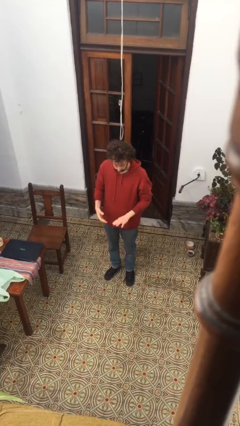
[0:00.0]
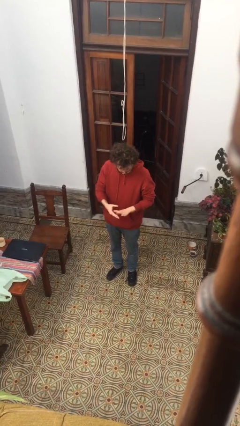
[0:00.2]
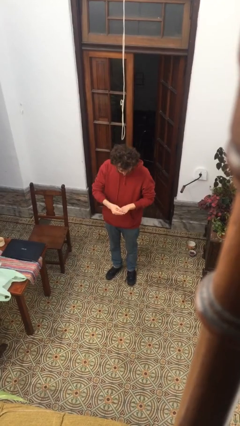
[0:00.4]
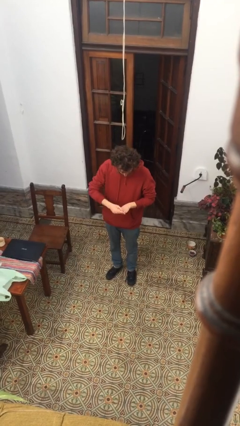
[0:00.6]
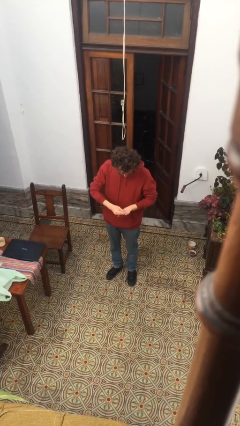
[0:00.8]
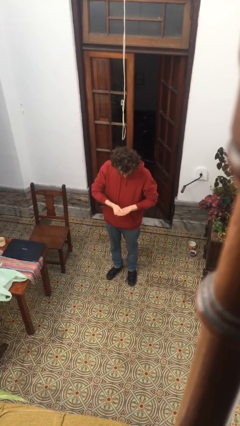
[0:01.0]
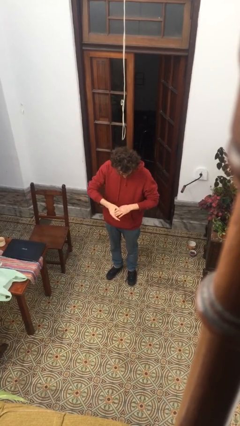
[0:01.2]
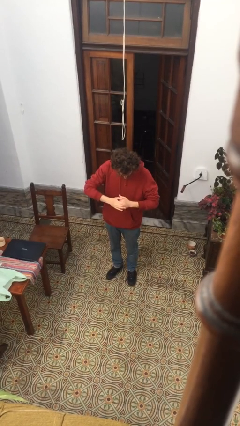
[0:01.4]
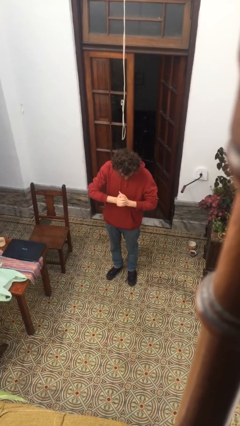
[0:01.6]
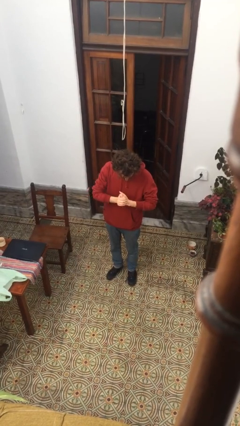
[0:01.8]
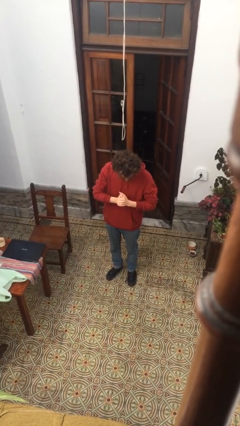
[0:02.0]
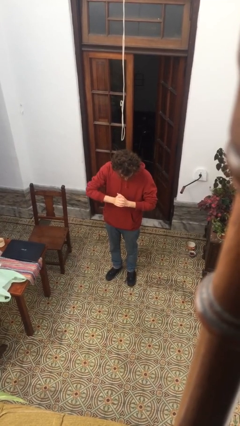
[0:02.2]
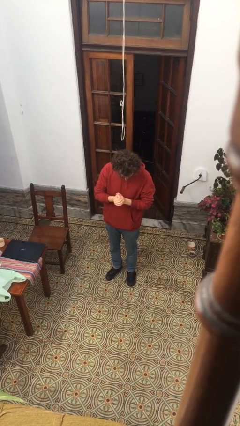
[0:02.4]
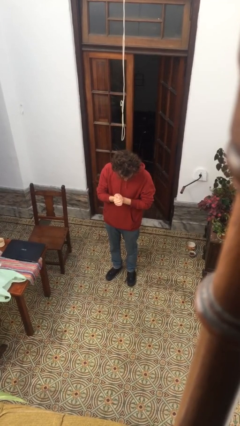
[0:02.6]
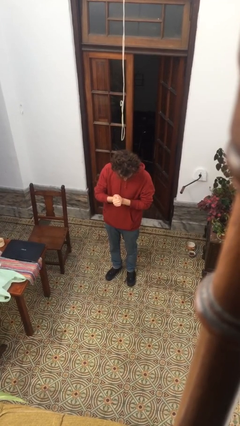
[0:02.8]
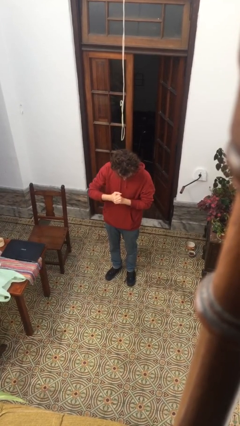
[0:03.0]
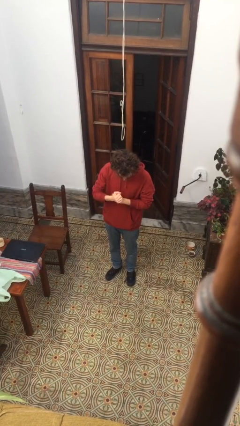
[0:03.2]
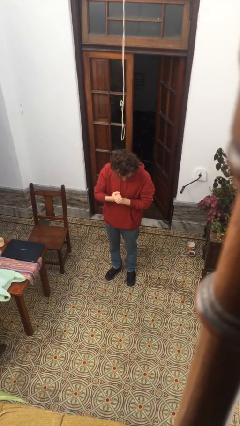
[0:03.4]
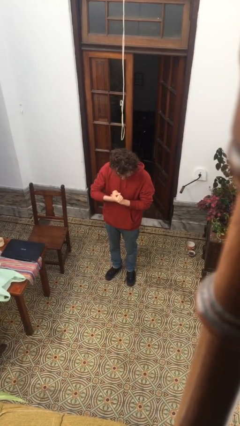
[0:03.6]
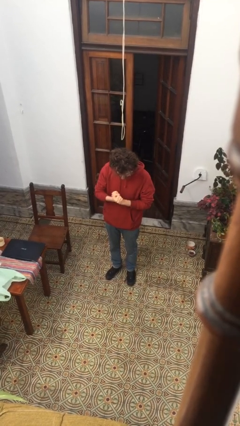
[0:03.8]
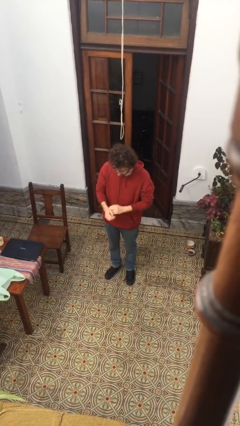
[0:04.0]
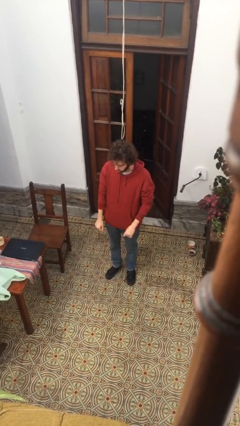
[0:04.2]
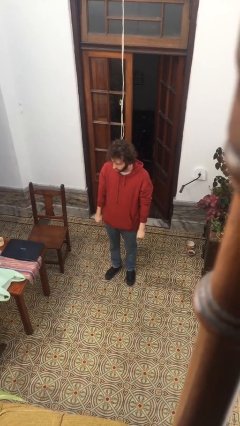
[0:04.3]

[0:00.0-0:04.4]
person cracks knuckles

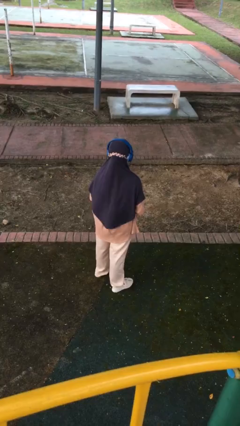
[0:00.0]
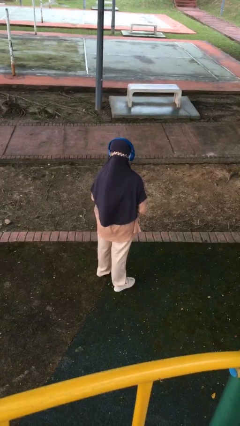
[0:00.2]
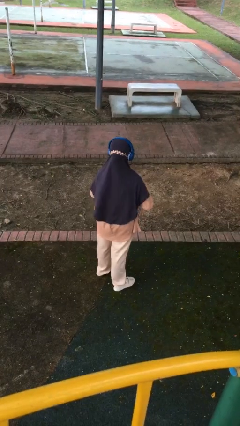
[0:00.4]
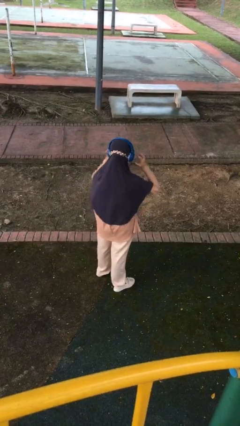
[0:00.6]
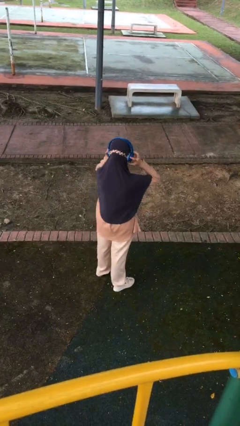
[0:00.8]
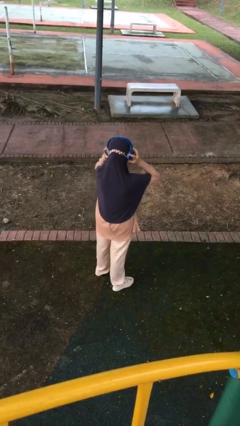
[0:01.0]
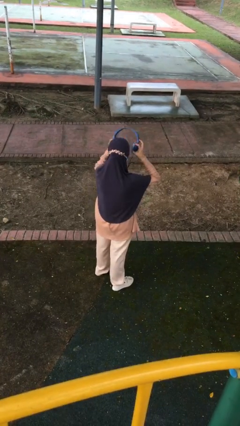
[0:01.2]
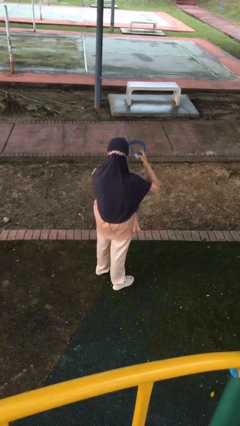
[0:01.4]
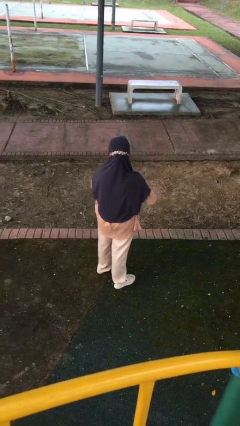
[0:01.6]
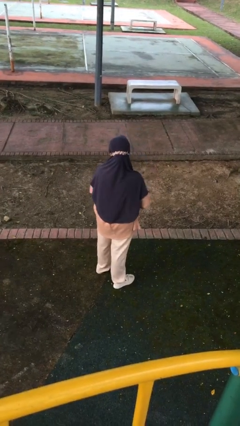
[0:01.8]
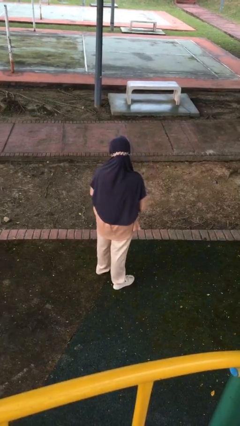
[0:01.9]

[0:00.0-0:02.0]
person takes off headphones

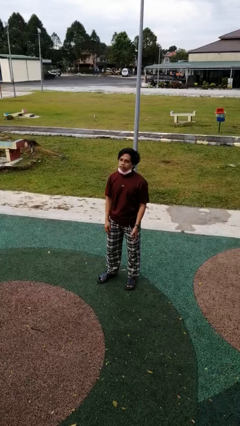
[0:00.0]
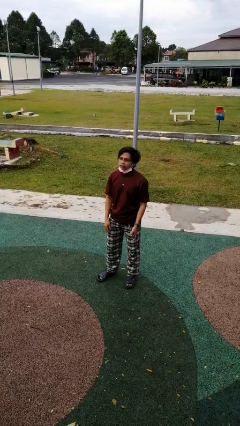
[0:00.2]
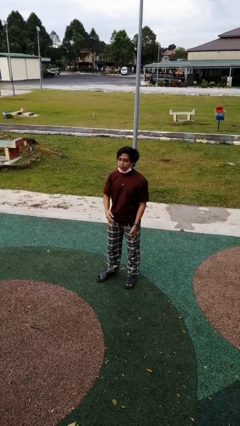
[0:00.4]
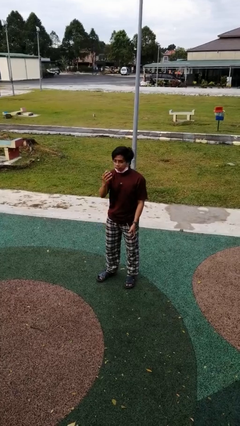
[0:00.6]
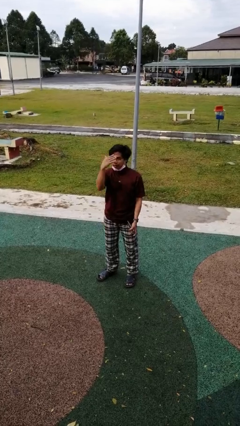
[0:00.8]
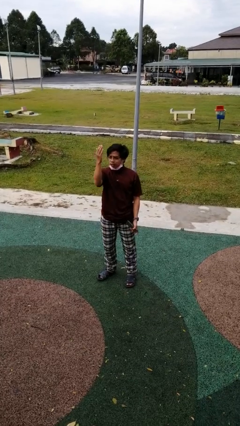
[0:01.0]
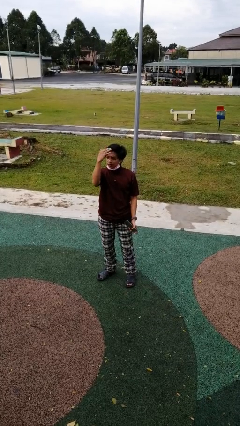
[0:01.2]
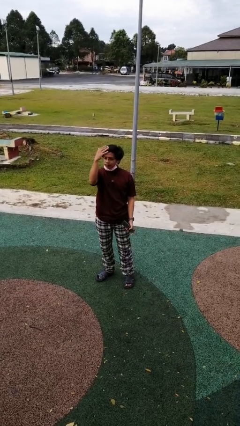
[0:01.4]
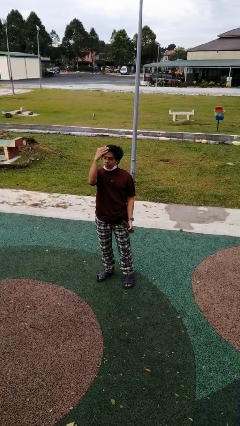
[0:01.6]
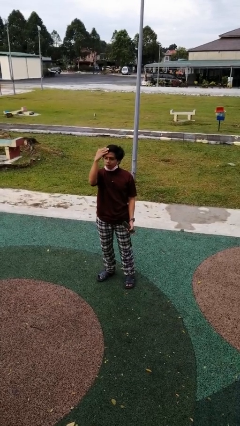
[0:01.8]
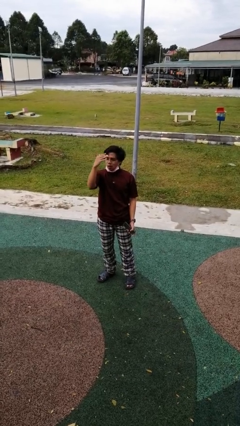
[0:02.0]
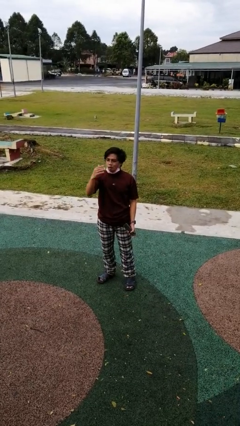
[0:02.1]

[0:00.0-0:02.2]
person gestures come here

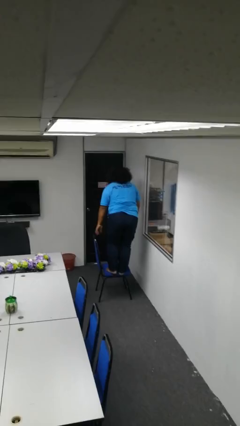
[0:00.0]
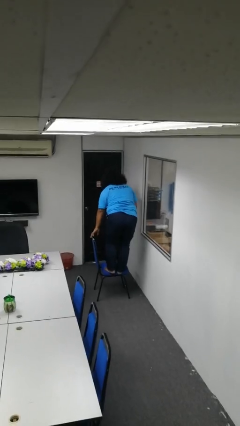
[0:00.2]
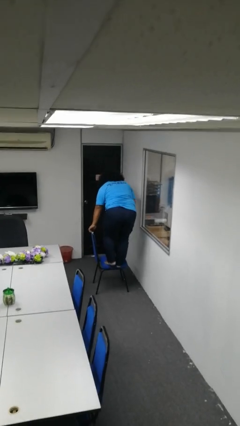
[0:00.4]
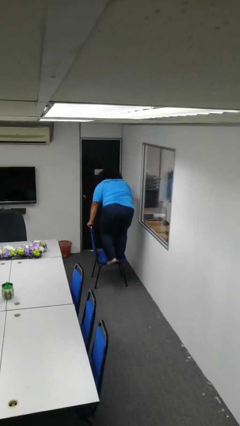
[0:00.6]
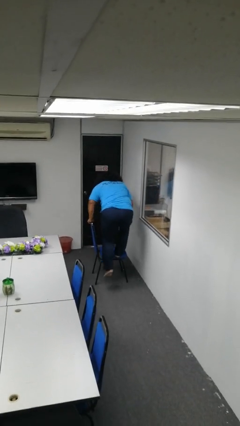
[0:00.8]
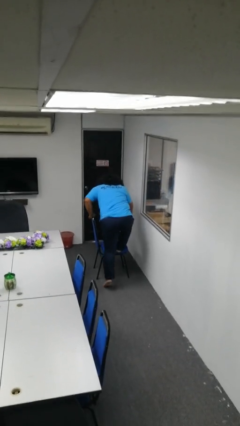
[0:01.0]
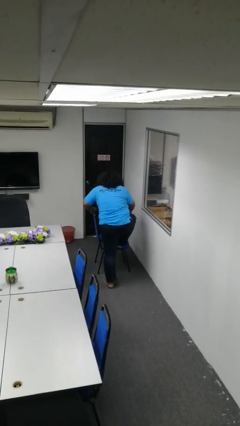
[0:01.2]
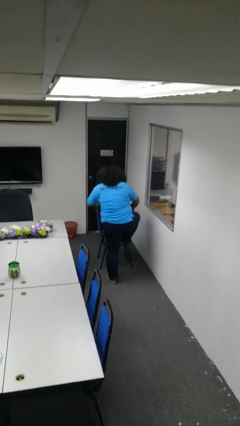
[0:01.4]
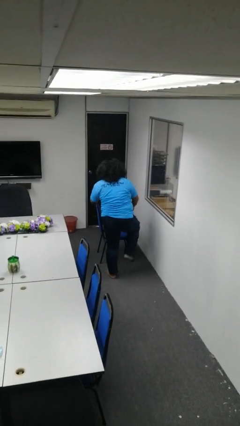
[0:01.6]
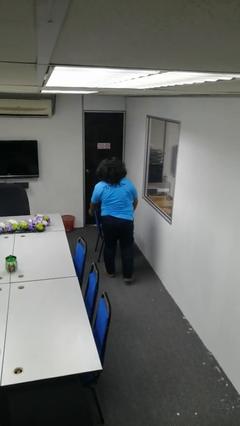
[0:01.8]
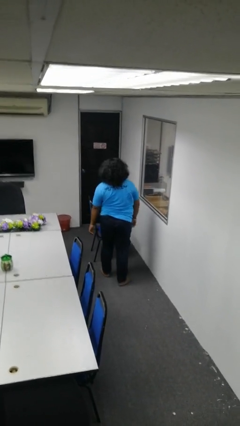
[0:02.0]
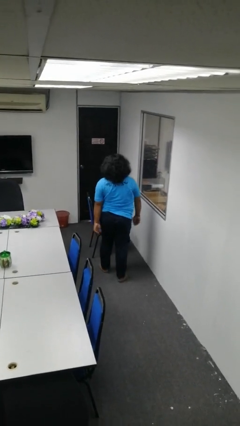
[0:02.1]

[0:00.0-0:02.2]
person climbs off chair

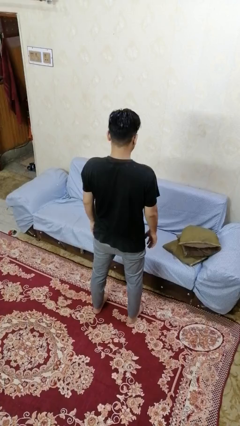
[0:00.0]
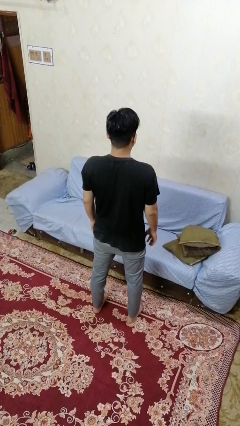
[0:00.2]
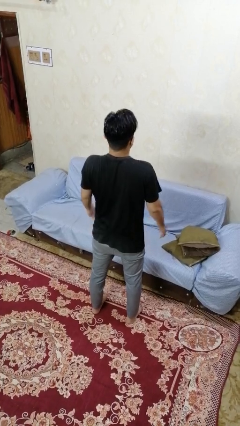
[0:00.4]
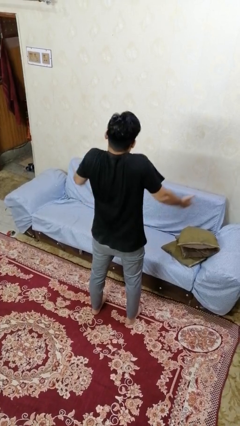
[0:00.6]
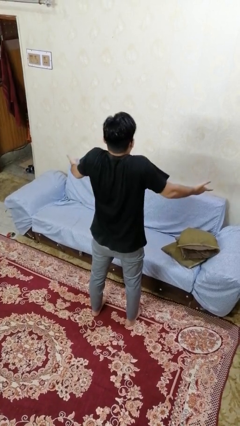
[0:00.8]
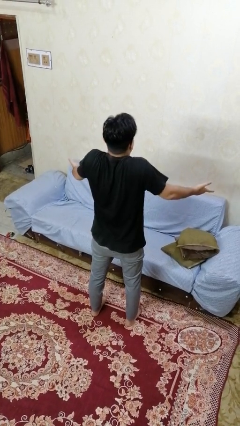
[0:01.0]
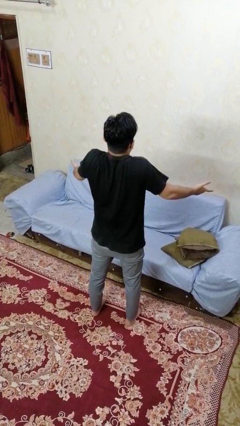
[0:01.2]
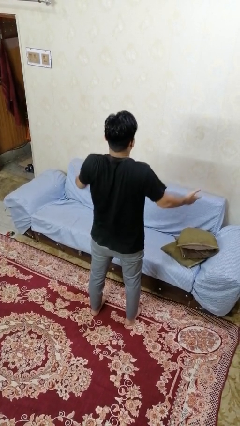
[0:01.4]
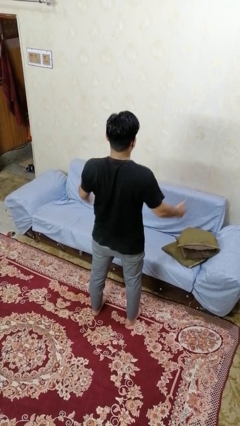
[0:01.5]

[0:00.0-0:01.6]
person shrugs

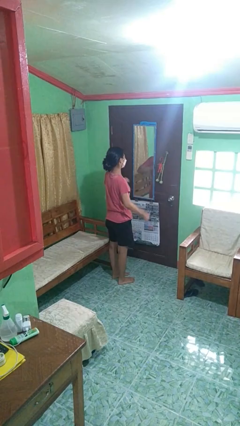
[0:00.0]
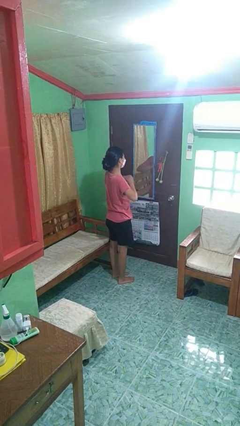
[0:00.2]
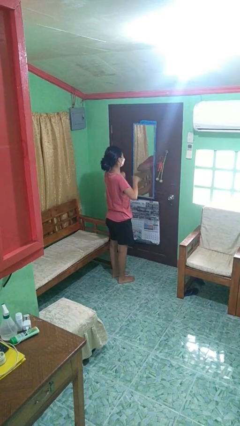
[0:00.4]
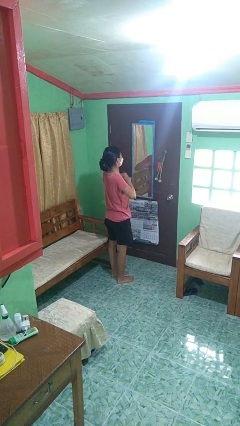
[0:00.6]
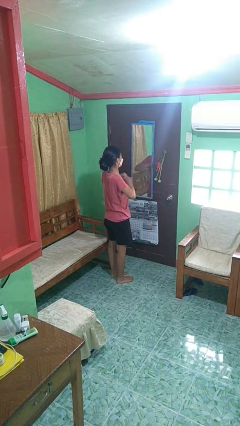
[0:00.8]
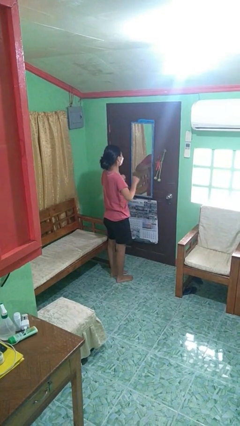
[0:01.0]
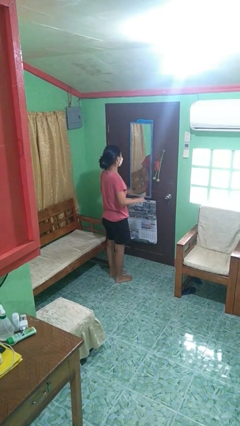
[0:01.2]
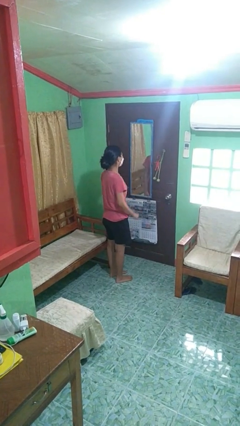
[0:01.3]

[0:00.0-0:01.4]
person drums on chest

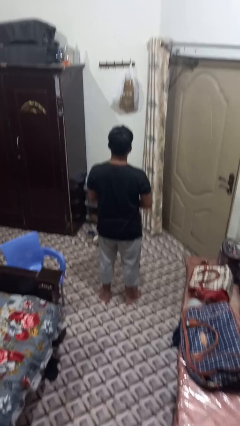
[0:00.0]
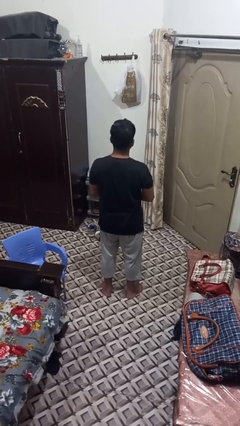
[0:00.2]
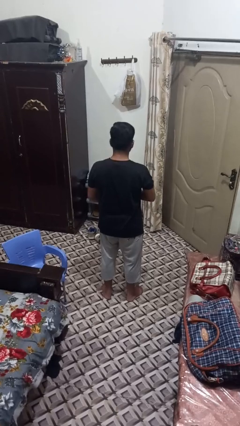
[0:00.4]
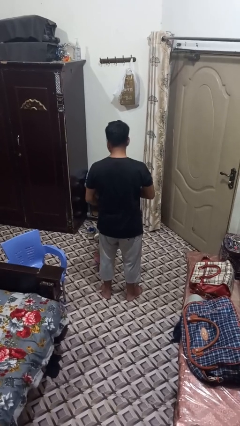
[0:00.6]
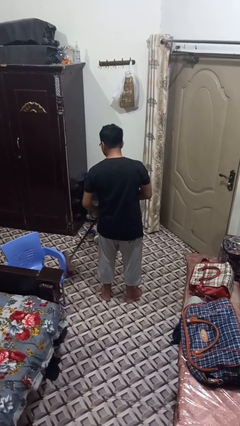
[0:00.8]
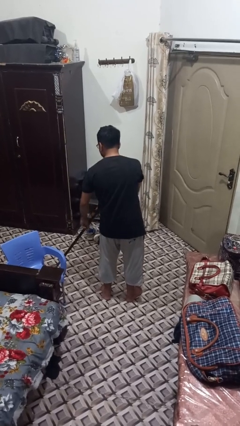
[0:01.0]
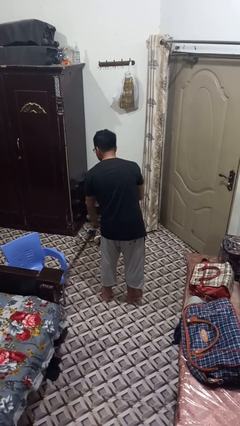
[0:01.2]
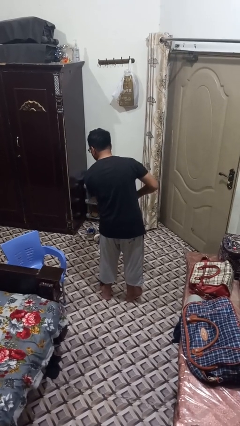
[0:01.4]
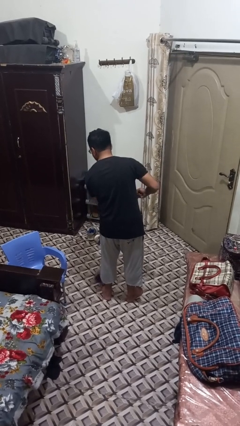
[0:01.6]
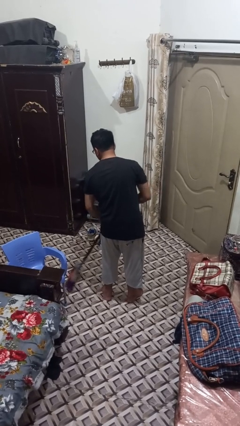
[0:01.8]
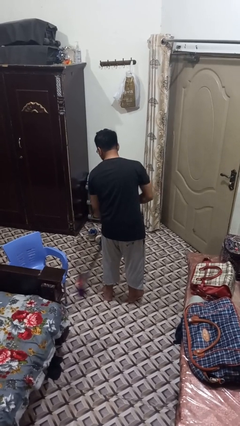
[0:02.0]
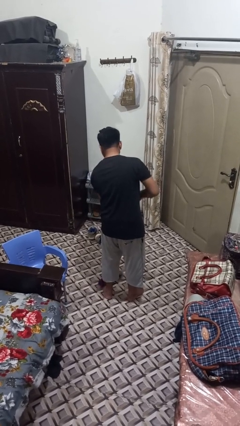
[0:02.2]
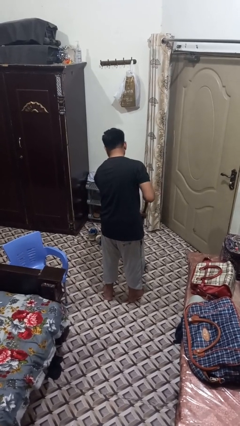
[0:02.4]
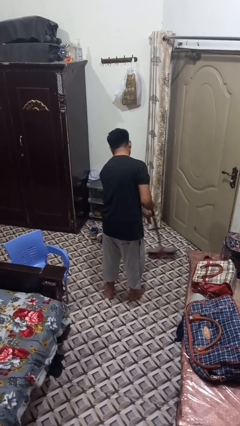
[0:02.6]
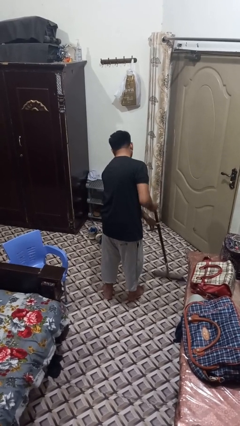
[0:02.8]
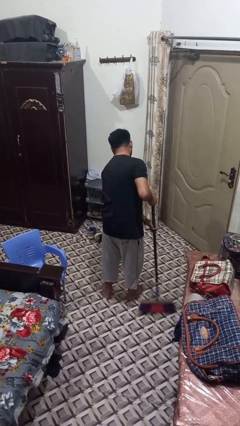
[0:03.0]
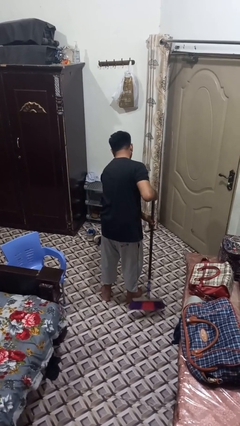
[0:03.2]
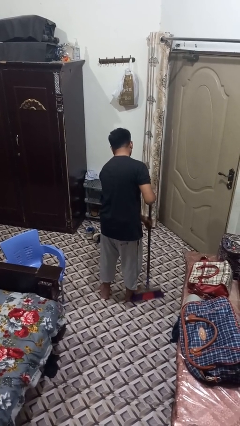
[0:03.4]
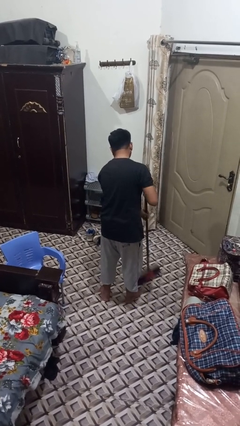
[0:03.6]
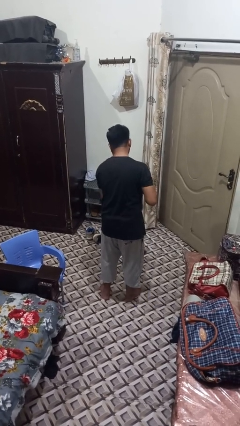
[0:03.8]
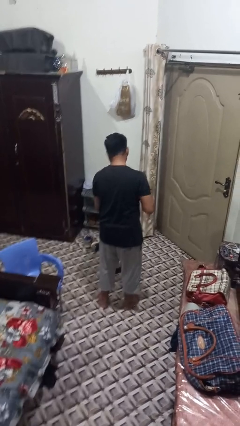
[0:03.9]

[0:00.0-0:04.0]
person sweeps floor
